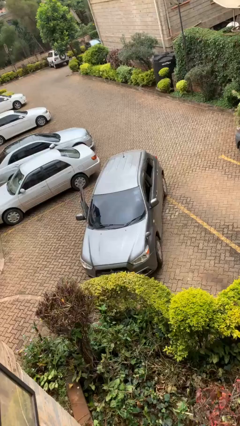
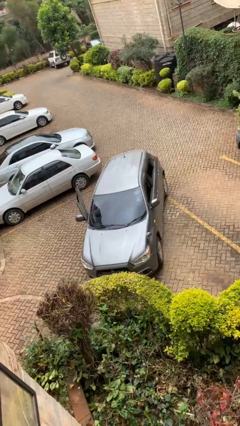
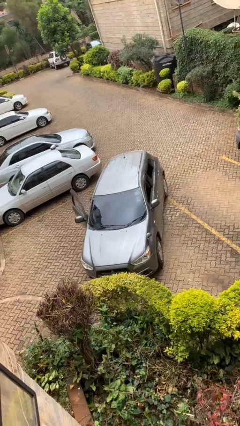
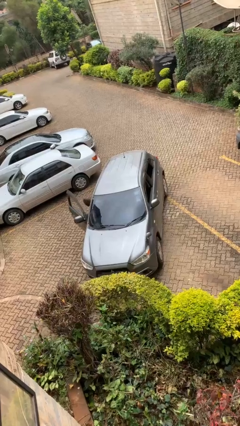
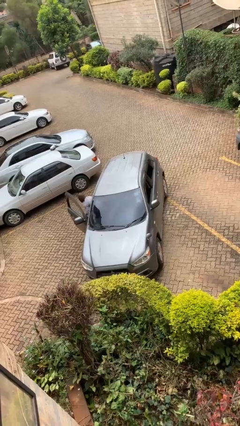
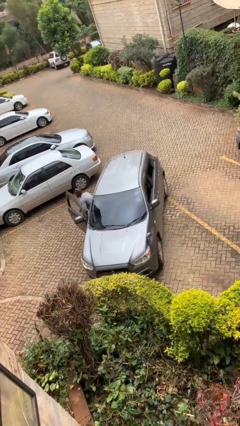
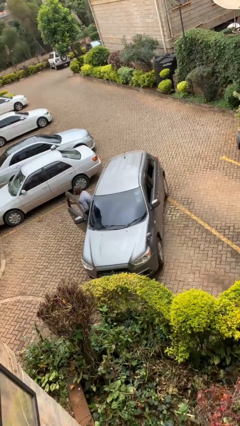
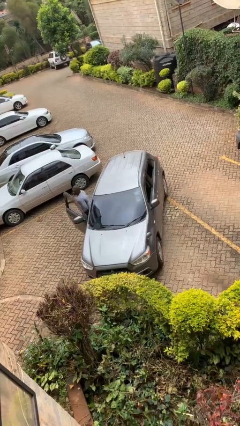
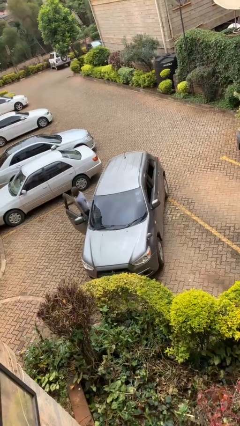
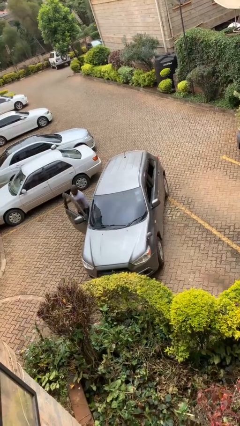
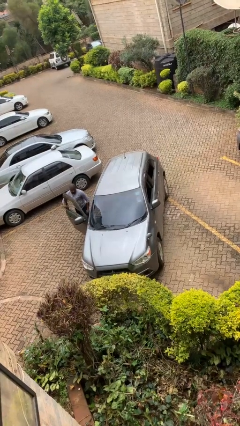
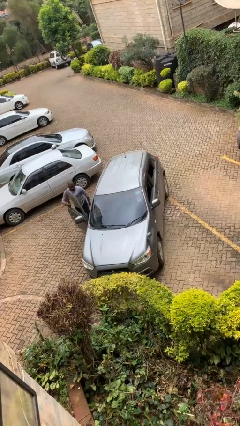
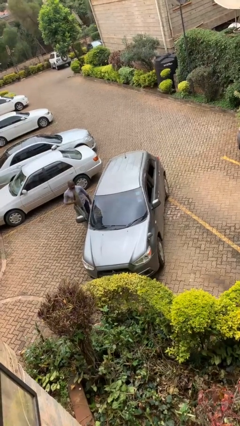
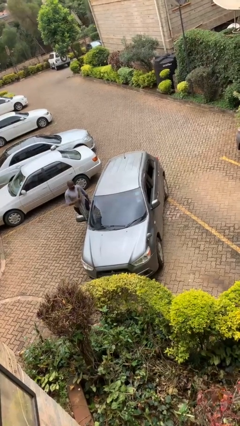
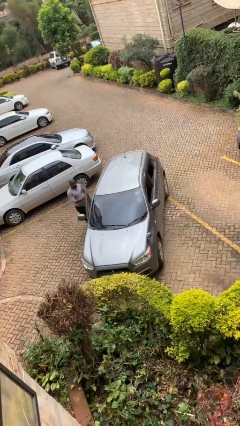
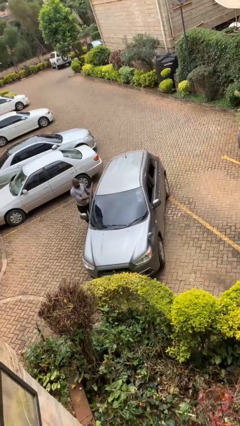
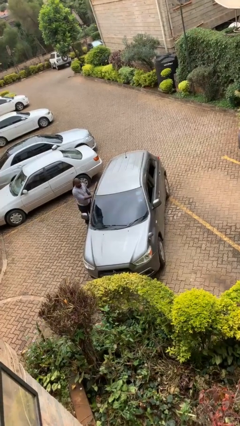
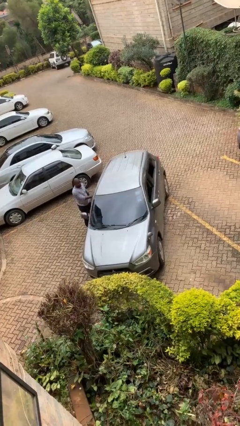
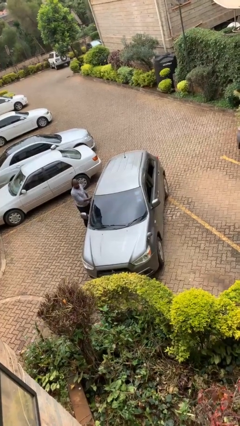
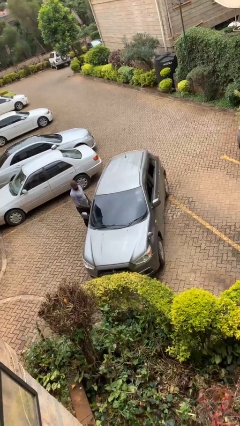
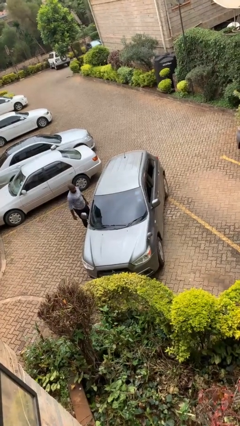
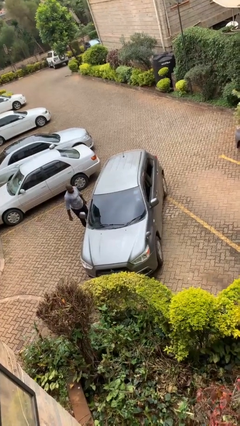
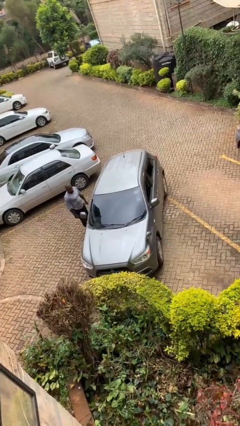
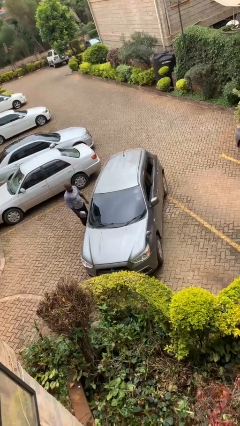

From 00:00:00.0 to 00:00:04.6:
car drops off person

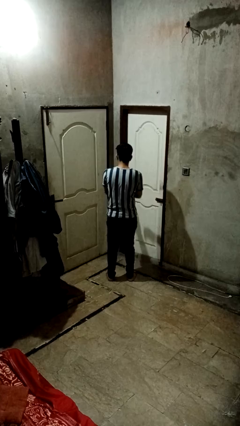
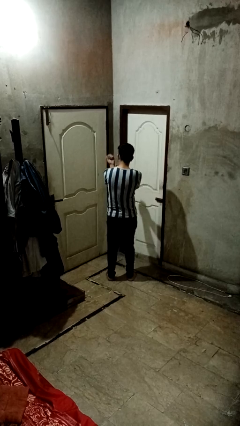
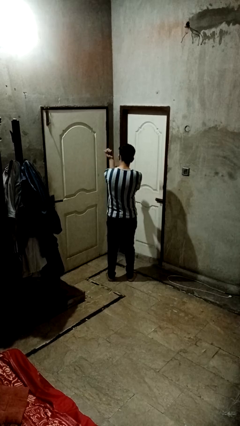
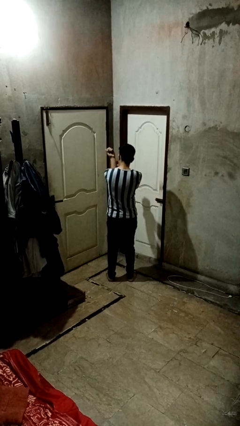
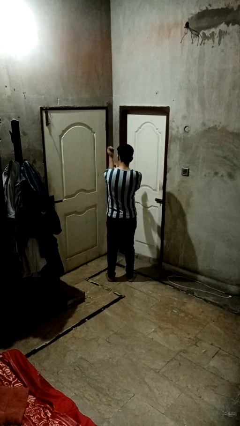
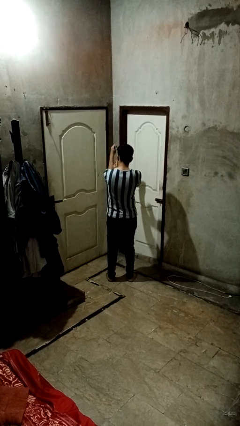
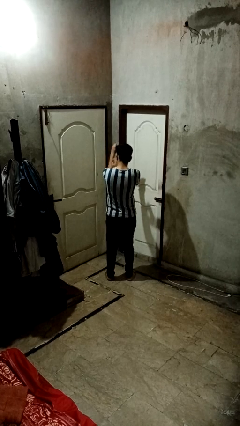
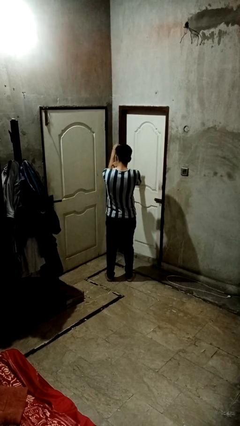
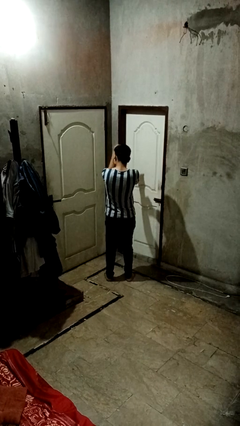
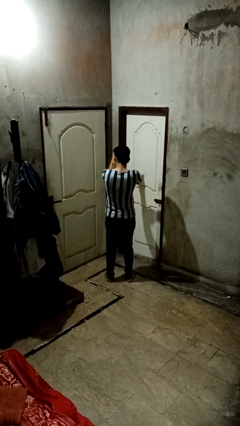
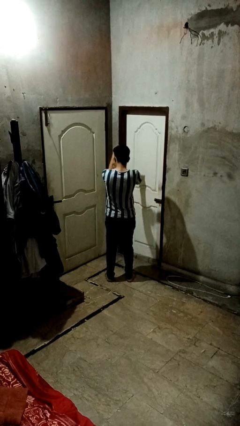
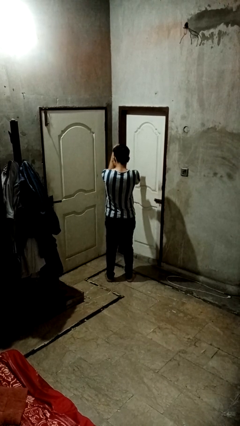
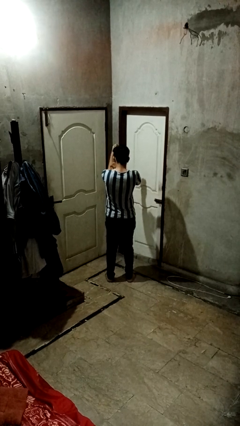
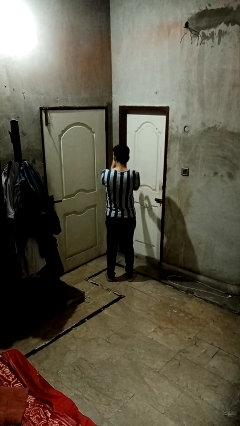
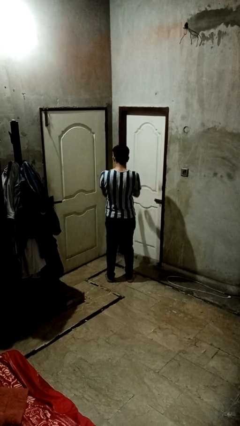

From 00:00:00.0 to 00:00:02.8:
person swats bug

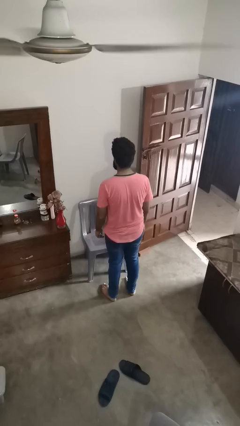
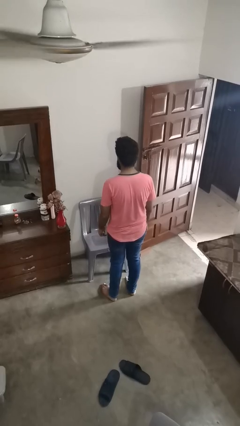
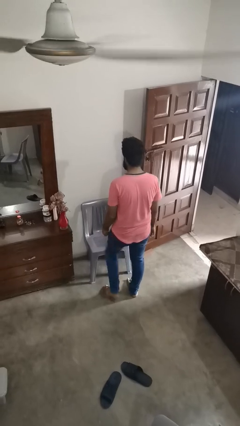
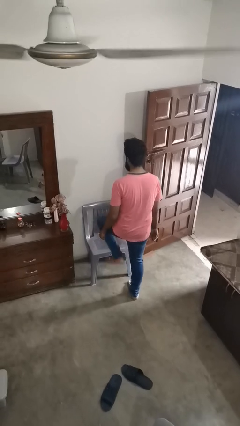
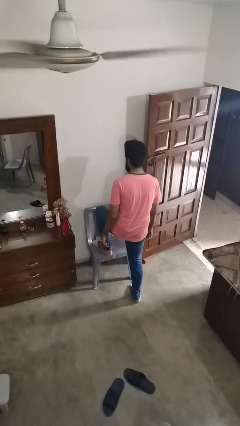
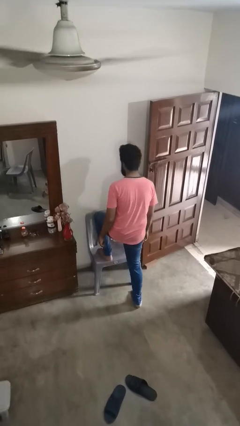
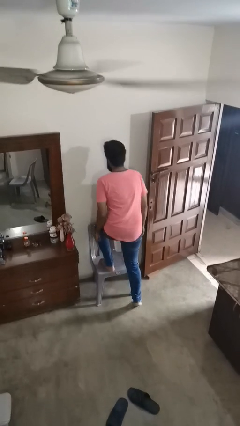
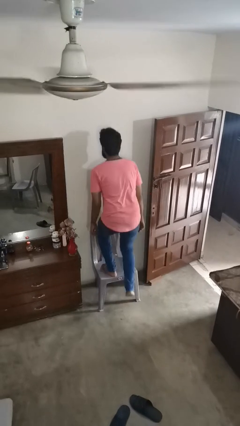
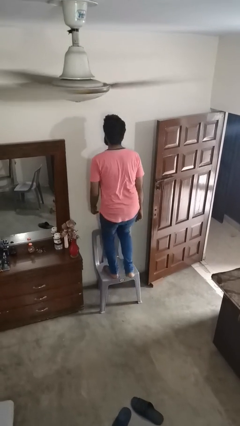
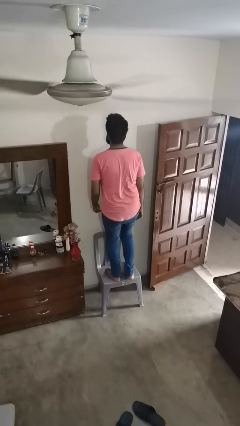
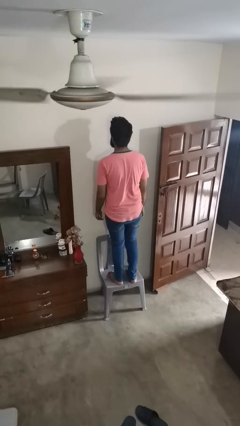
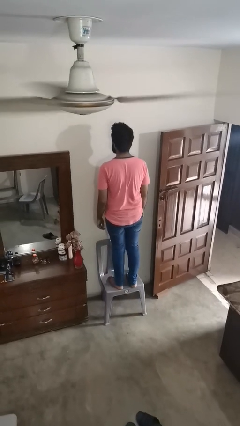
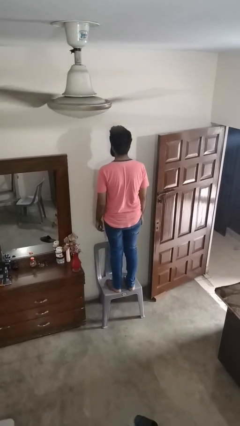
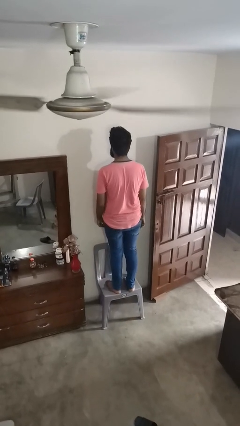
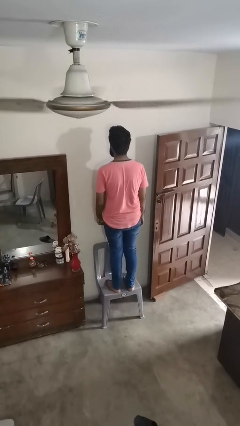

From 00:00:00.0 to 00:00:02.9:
person climbs on chair

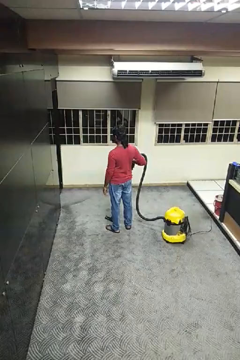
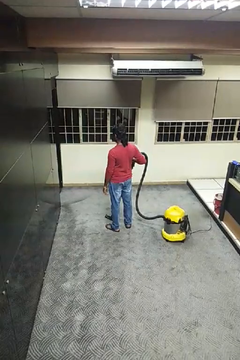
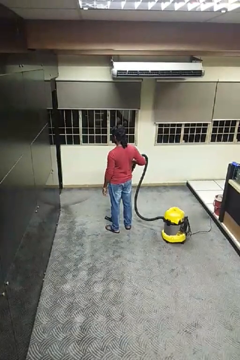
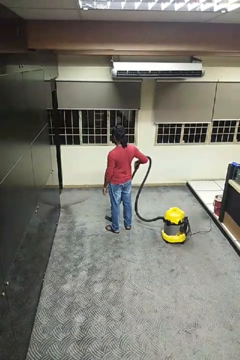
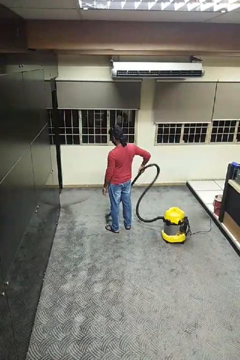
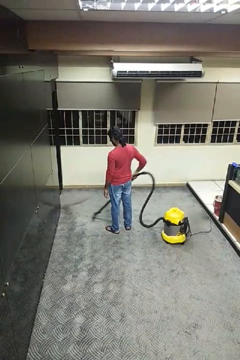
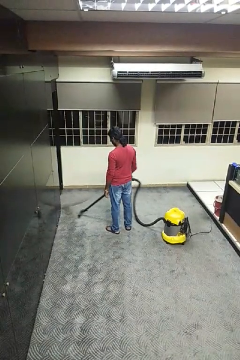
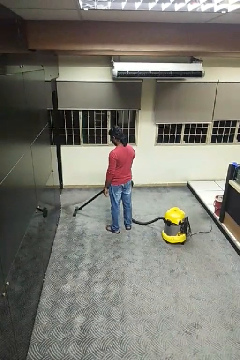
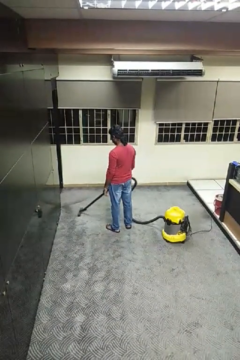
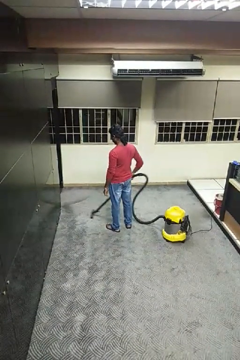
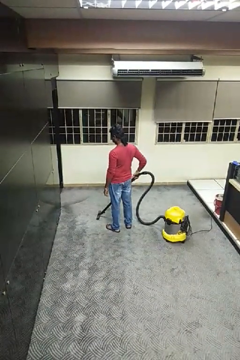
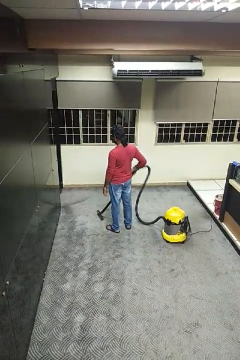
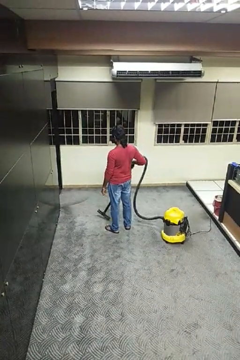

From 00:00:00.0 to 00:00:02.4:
person vacuums carpet

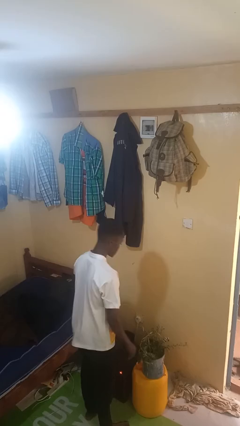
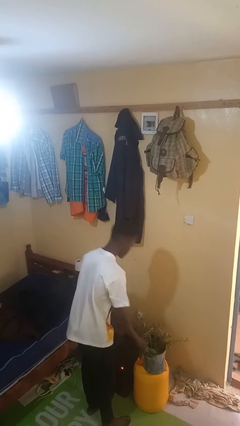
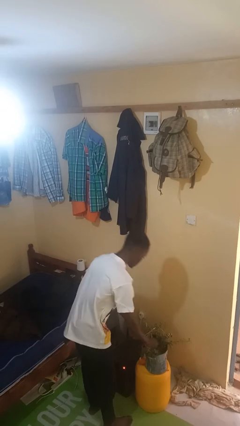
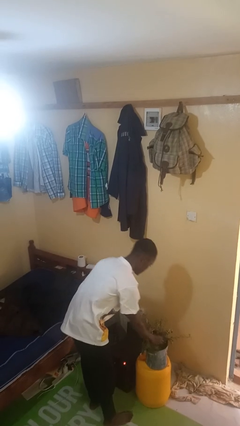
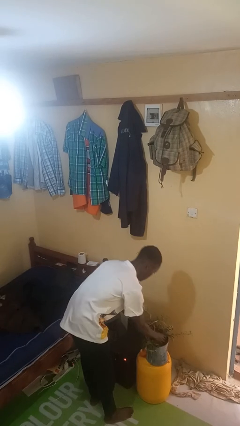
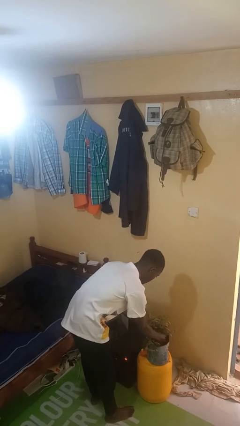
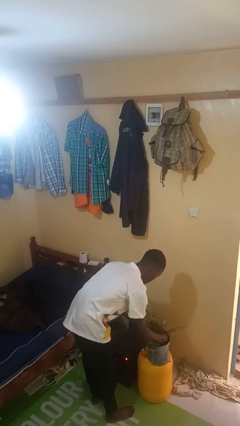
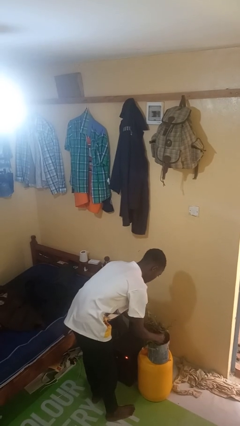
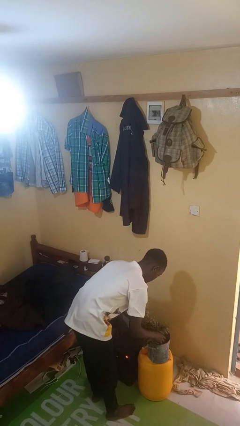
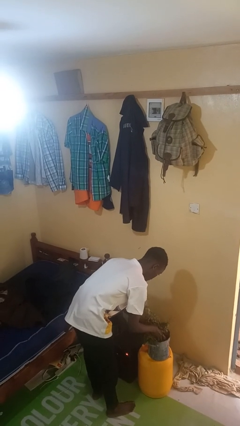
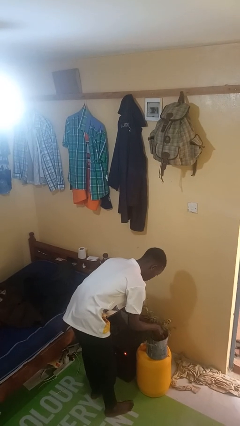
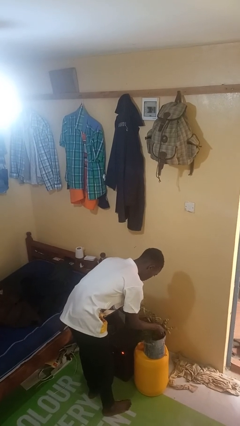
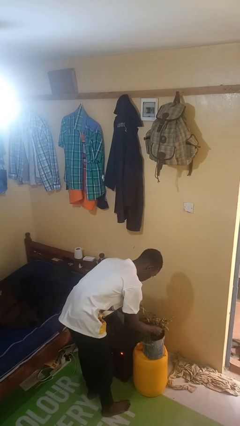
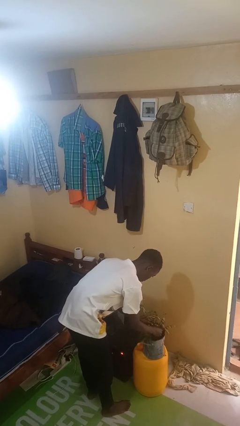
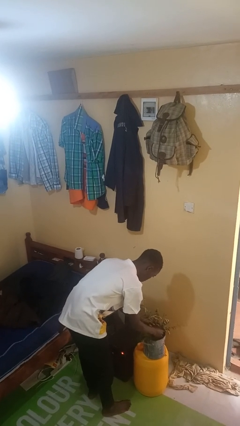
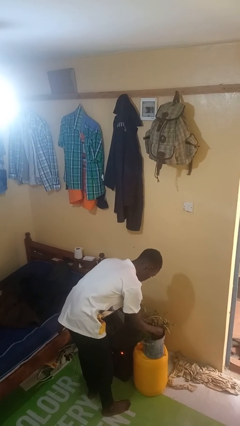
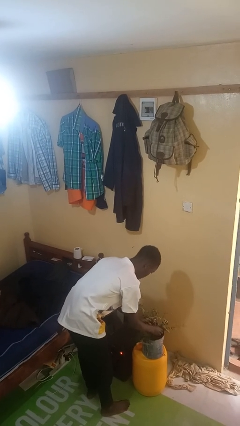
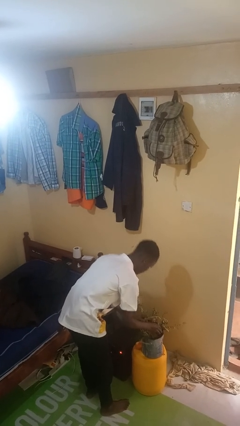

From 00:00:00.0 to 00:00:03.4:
person arranges flowers in vase

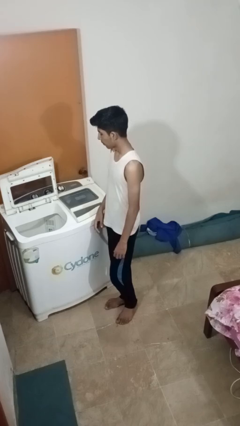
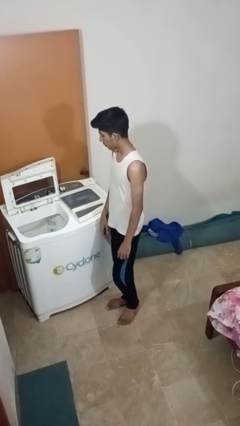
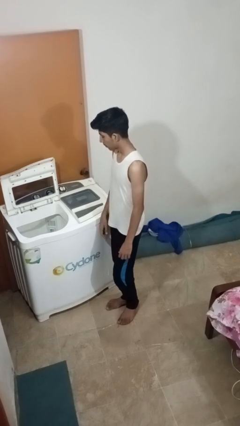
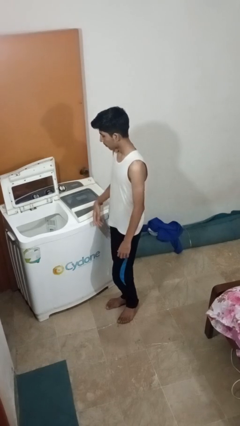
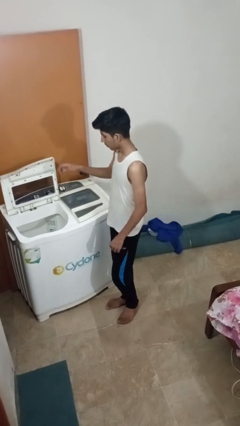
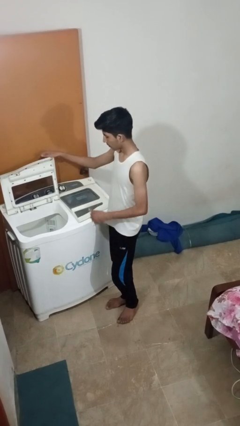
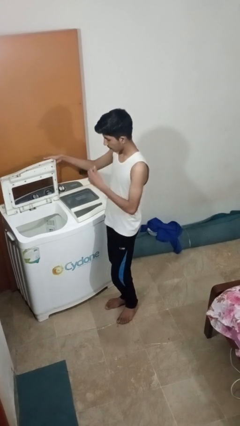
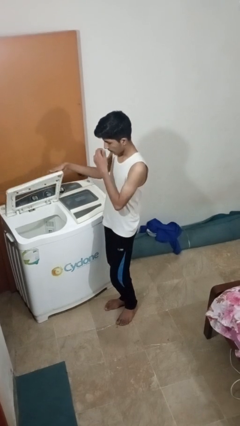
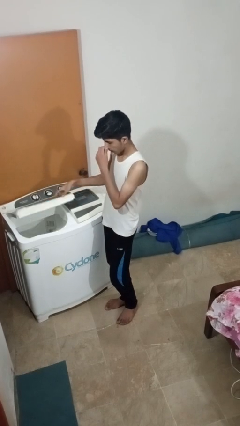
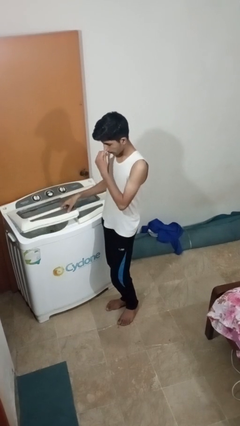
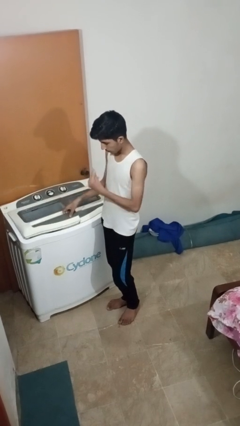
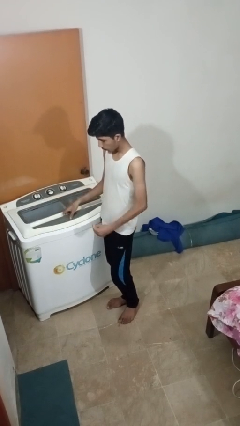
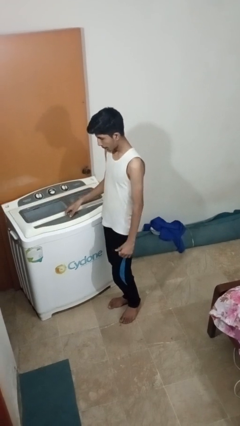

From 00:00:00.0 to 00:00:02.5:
person closes clothes washer
